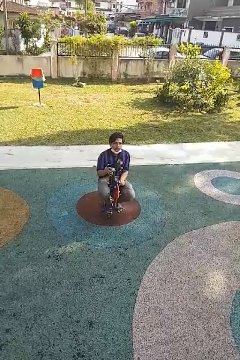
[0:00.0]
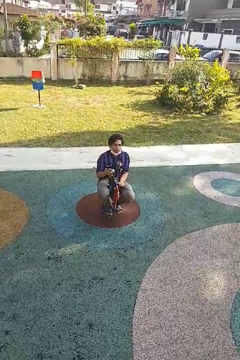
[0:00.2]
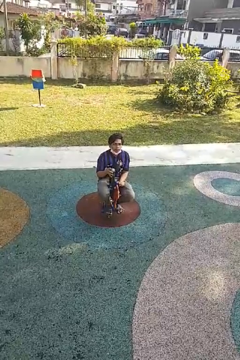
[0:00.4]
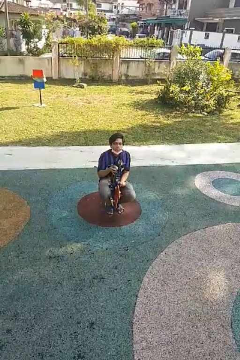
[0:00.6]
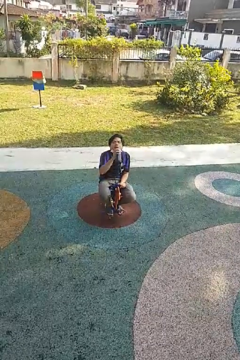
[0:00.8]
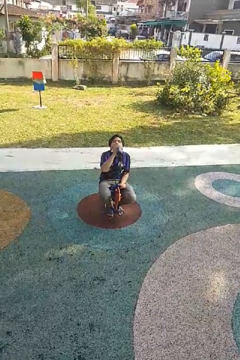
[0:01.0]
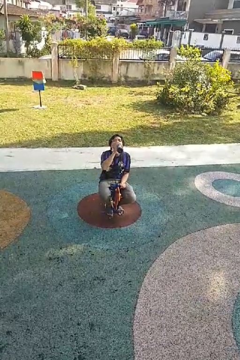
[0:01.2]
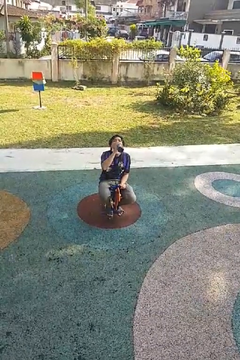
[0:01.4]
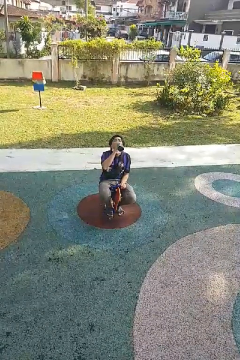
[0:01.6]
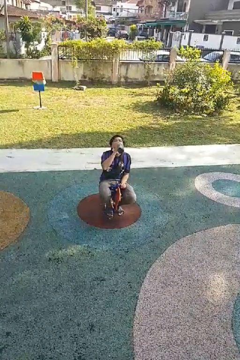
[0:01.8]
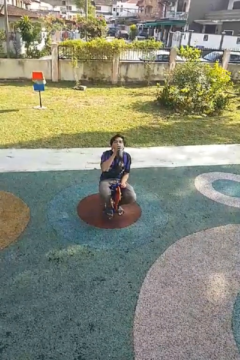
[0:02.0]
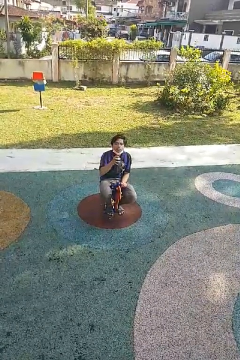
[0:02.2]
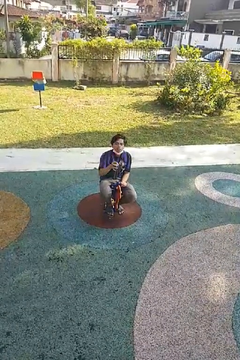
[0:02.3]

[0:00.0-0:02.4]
person drinks from bottle

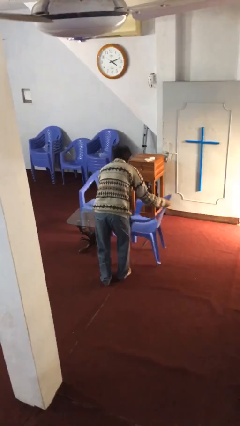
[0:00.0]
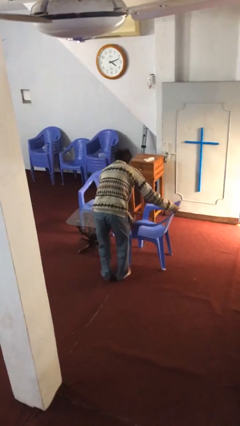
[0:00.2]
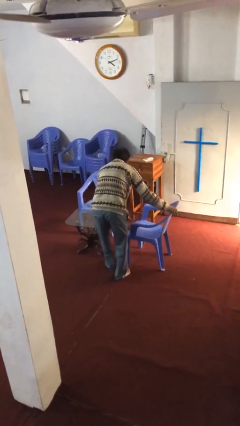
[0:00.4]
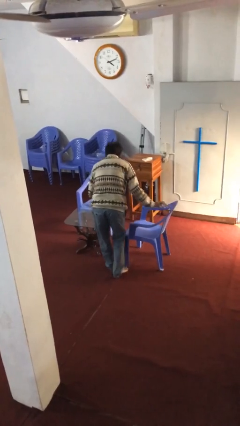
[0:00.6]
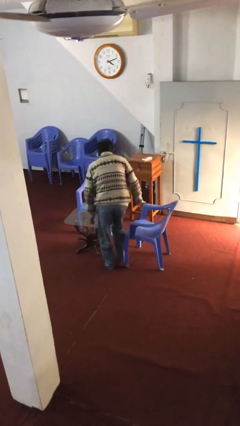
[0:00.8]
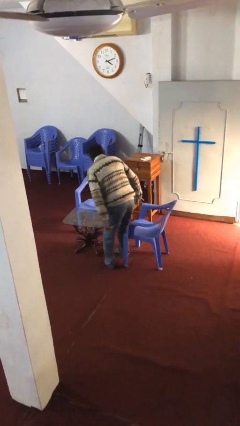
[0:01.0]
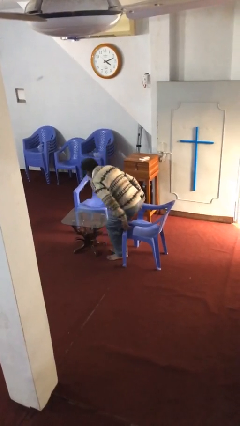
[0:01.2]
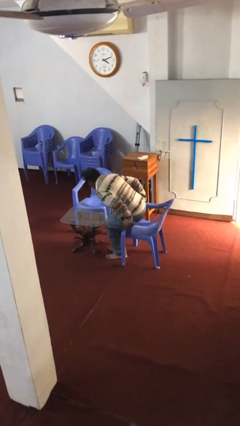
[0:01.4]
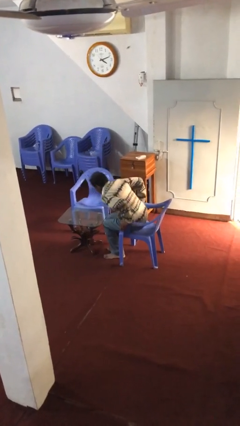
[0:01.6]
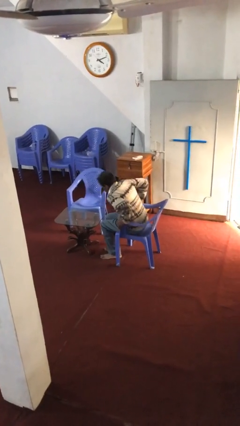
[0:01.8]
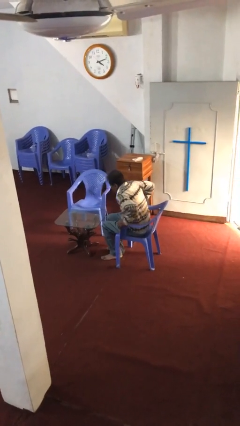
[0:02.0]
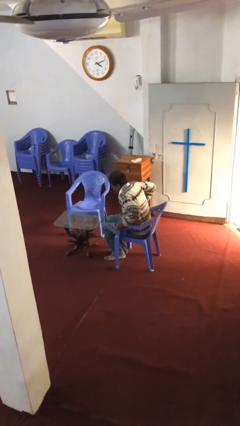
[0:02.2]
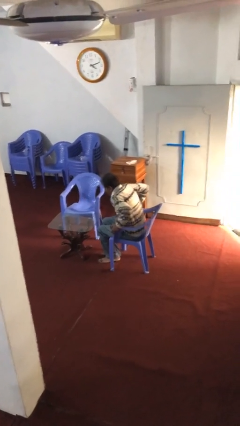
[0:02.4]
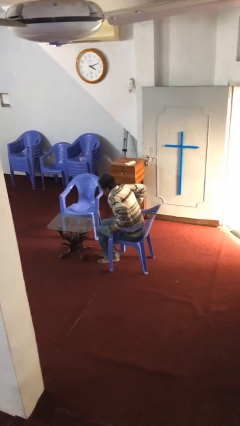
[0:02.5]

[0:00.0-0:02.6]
person sits down

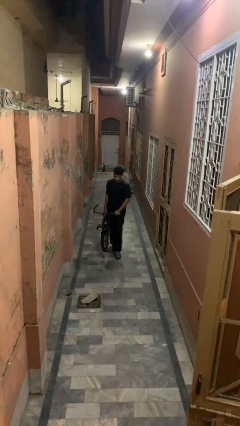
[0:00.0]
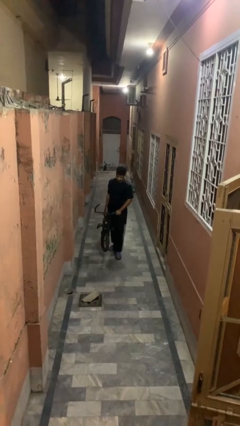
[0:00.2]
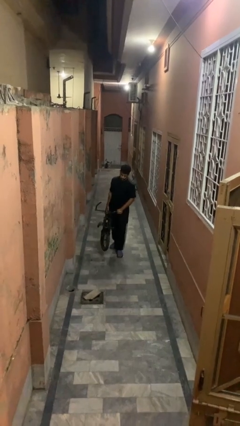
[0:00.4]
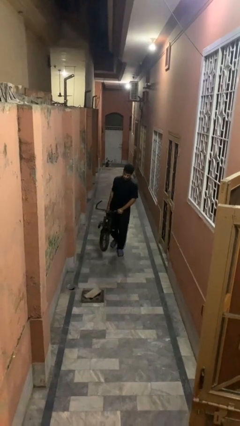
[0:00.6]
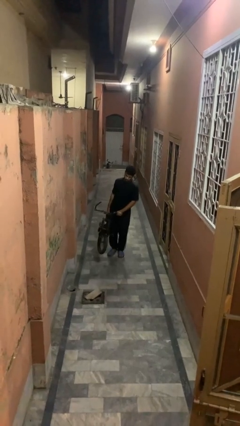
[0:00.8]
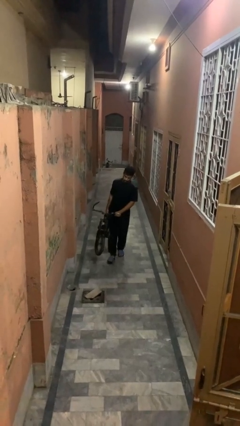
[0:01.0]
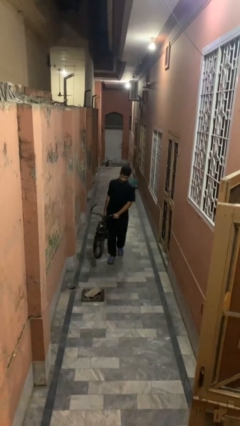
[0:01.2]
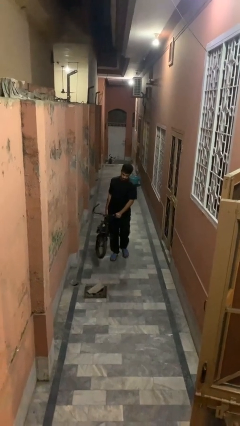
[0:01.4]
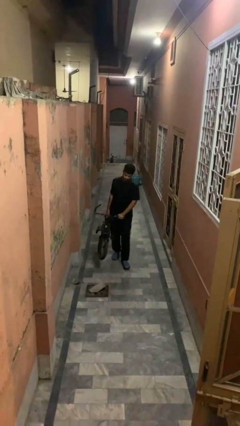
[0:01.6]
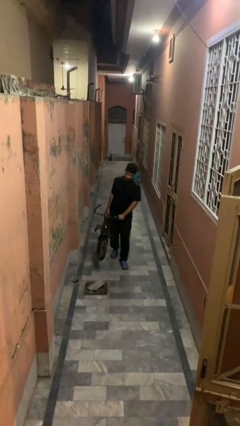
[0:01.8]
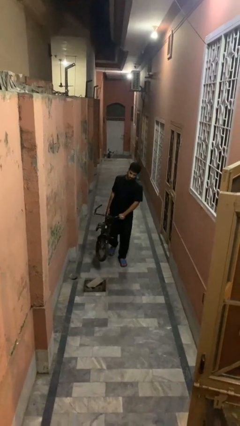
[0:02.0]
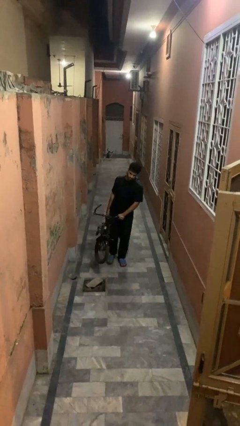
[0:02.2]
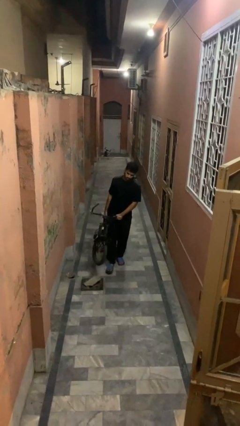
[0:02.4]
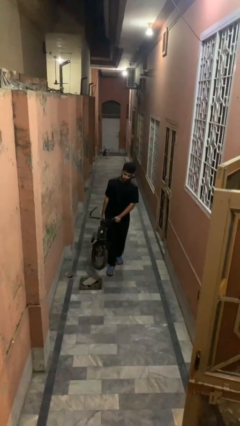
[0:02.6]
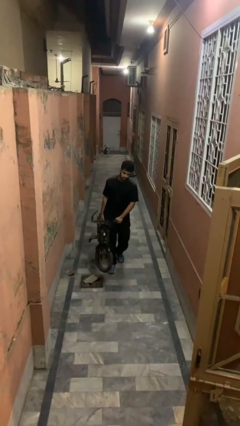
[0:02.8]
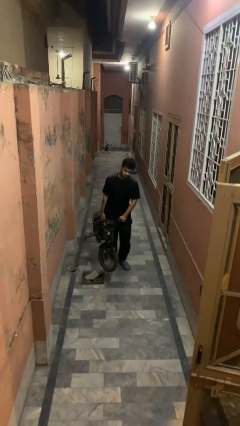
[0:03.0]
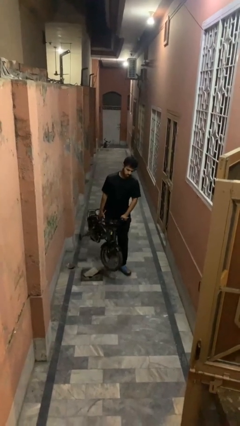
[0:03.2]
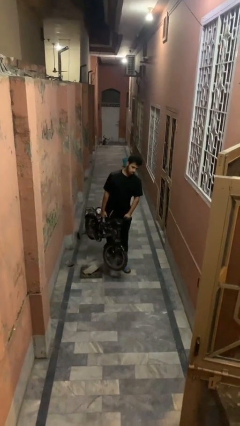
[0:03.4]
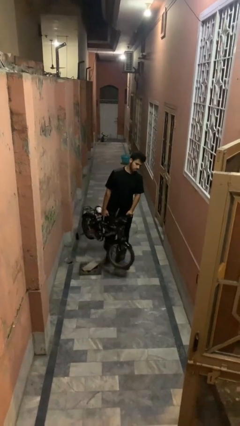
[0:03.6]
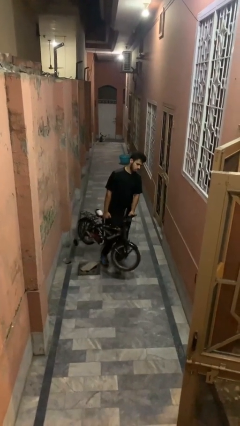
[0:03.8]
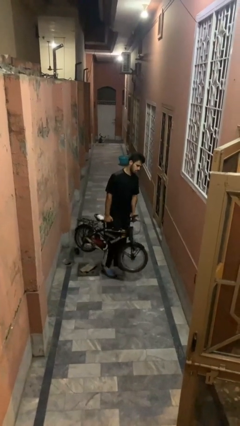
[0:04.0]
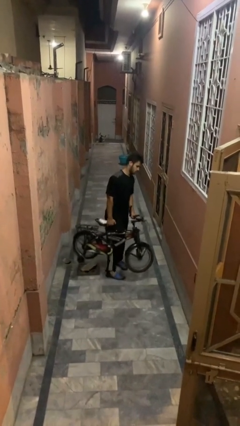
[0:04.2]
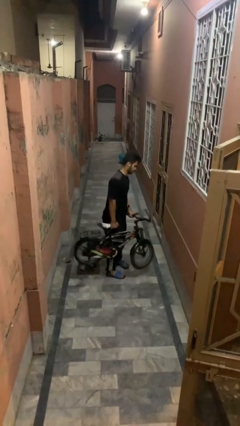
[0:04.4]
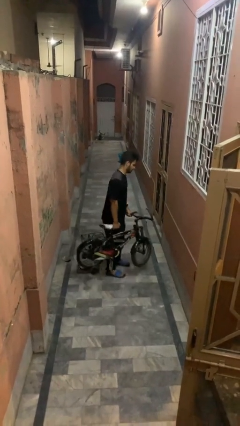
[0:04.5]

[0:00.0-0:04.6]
person carries bicycle

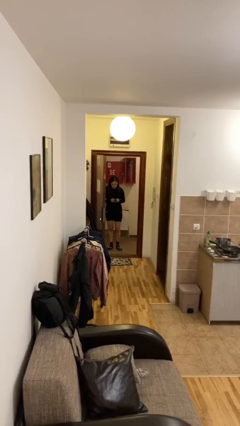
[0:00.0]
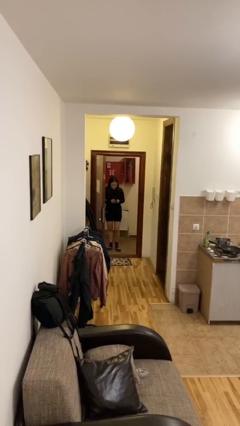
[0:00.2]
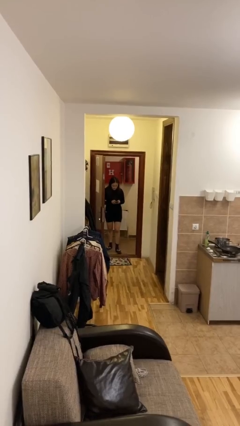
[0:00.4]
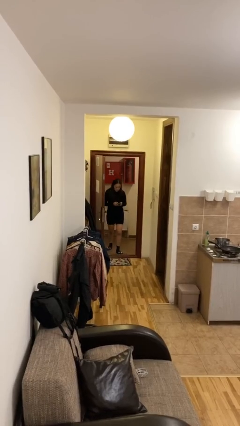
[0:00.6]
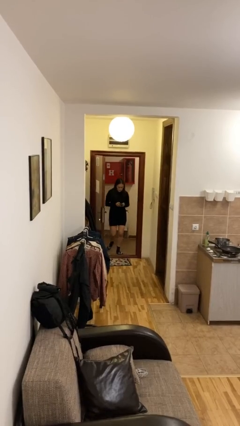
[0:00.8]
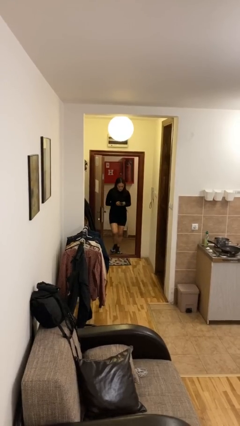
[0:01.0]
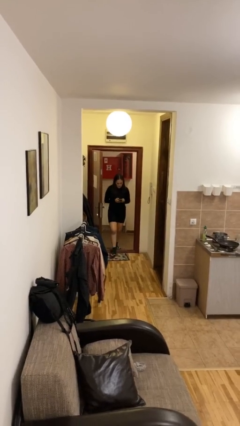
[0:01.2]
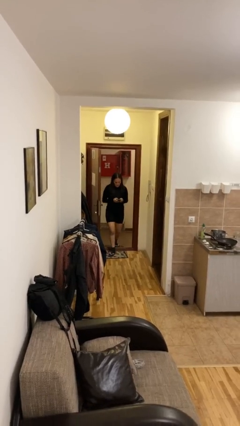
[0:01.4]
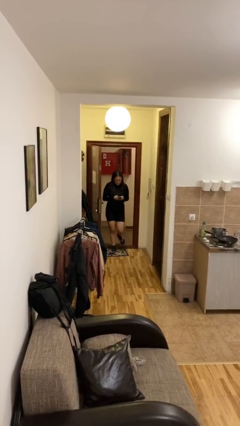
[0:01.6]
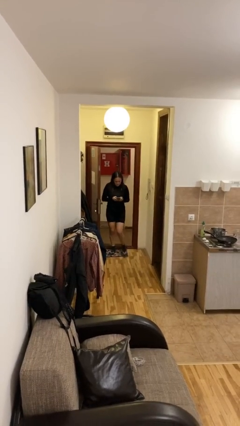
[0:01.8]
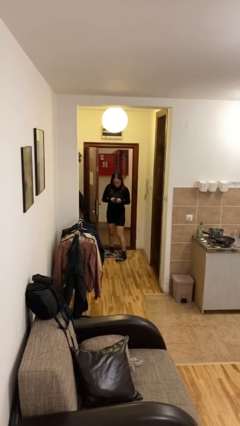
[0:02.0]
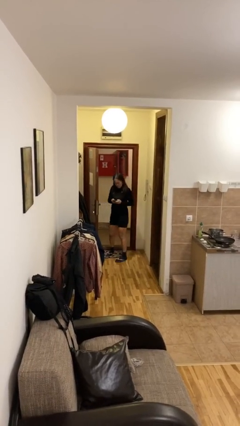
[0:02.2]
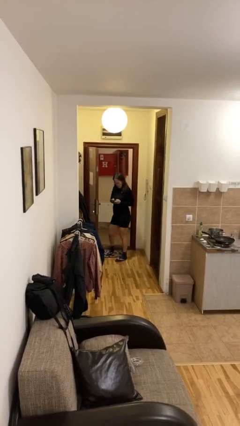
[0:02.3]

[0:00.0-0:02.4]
person enters scene through structure

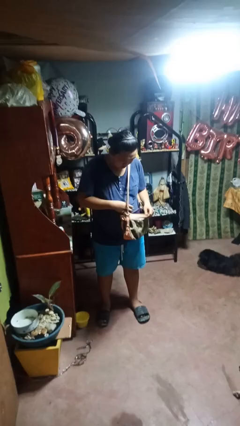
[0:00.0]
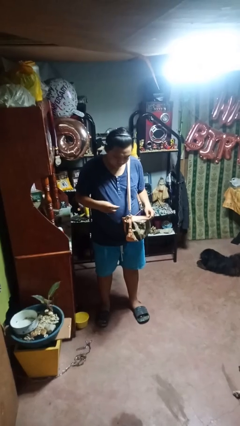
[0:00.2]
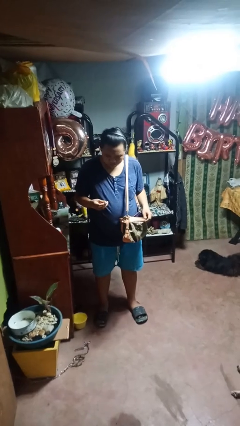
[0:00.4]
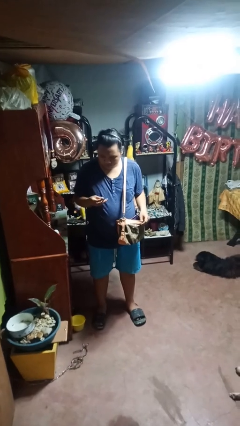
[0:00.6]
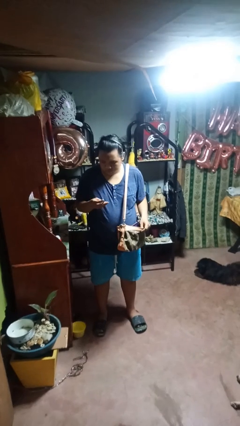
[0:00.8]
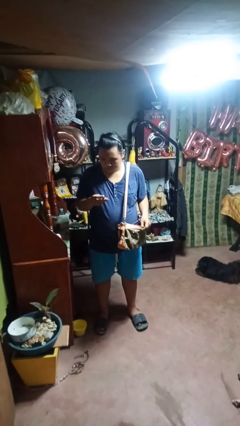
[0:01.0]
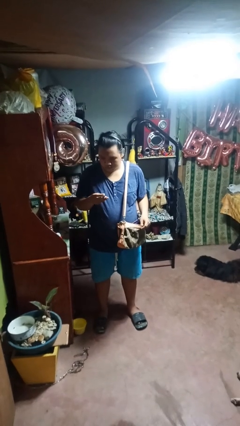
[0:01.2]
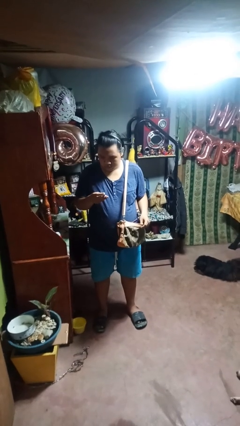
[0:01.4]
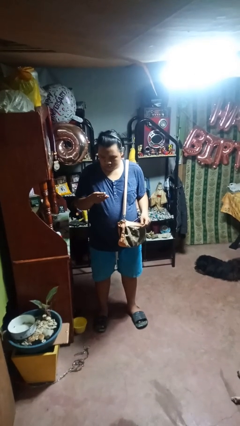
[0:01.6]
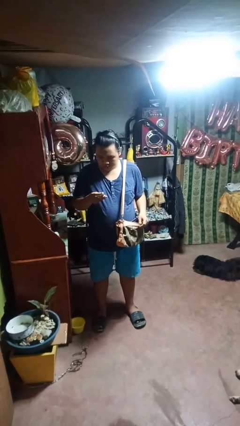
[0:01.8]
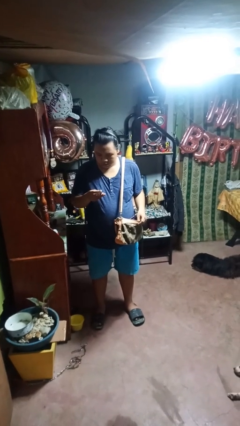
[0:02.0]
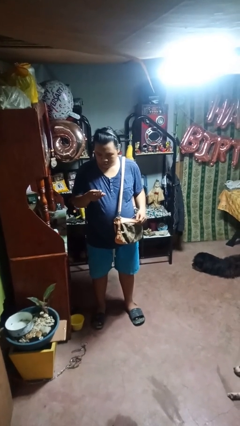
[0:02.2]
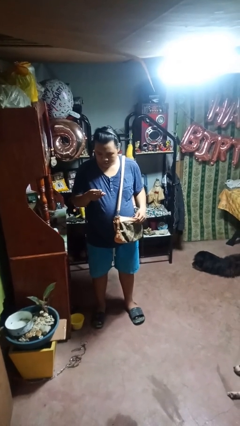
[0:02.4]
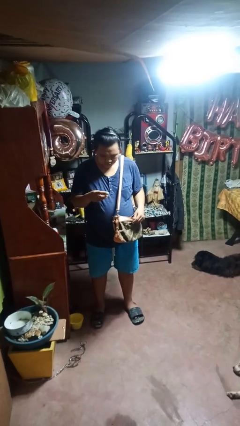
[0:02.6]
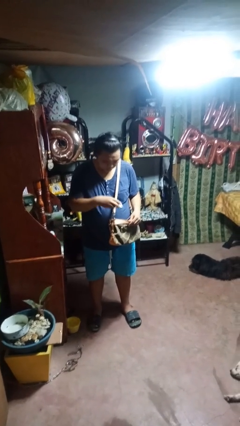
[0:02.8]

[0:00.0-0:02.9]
person takes object from purse

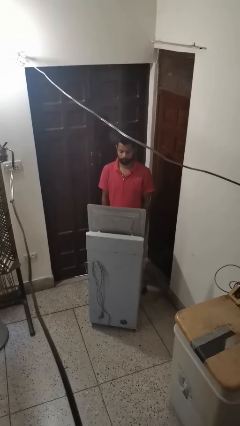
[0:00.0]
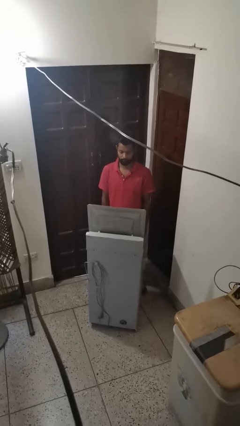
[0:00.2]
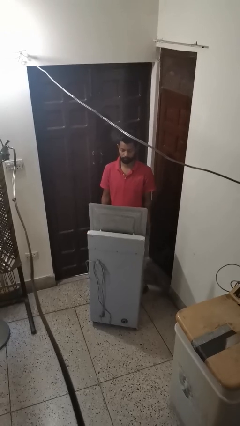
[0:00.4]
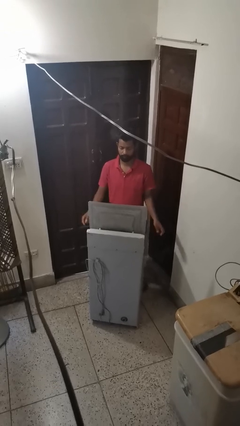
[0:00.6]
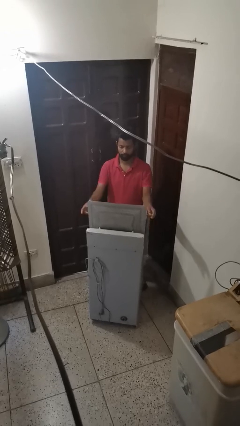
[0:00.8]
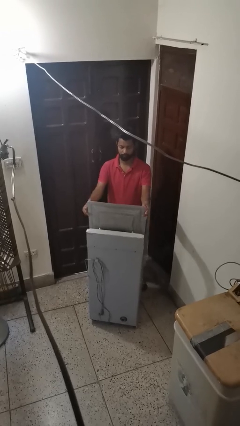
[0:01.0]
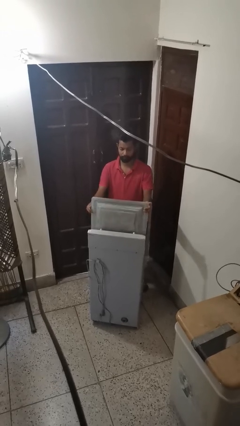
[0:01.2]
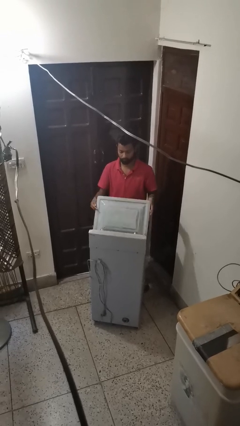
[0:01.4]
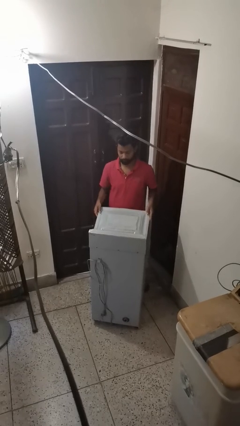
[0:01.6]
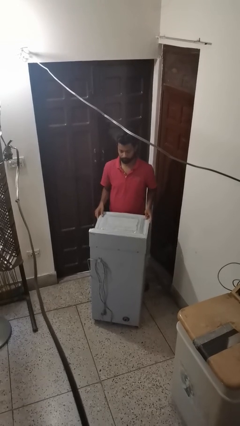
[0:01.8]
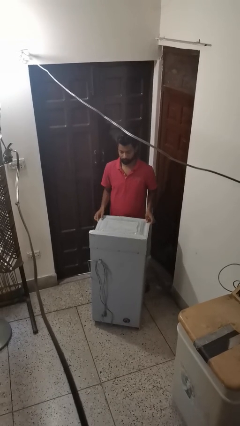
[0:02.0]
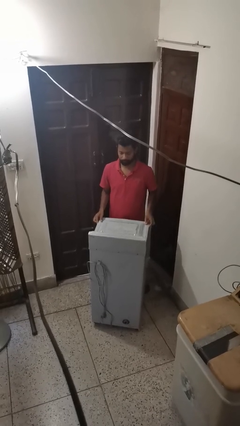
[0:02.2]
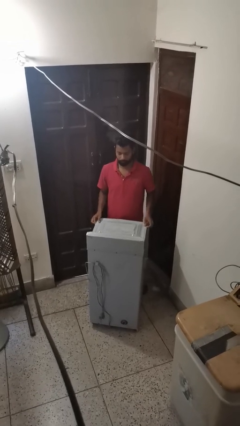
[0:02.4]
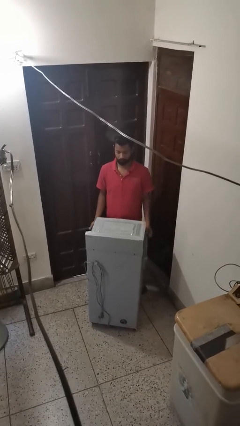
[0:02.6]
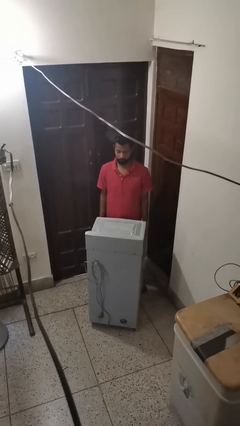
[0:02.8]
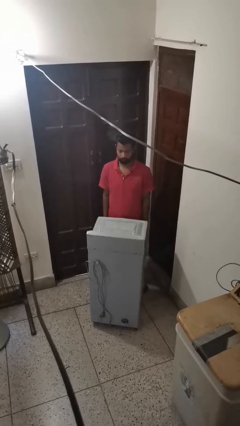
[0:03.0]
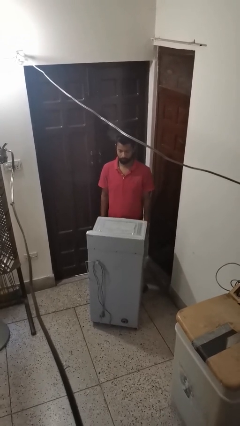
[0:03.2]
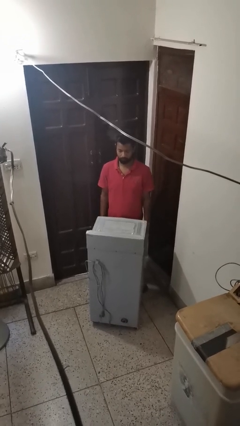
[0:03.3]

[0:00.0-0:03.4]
person closes clothes washer
